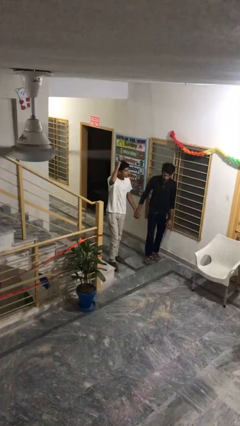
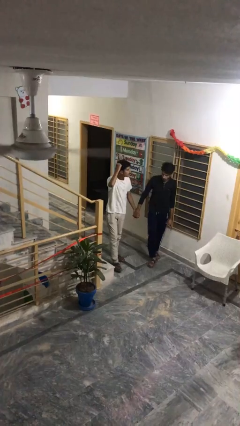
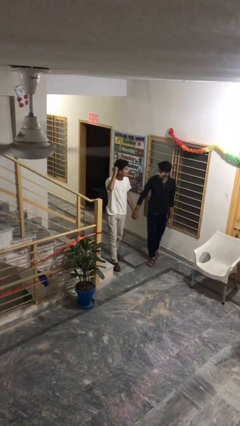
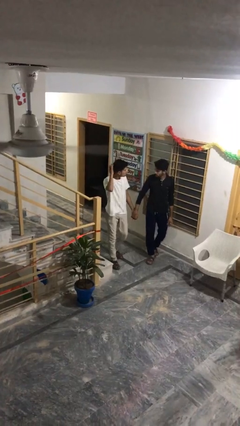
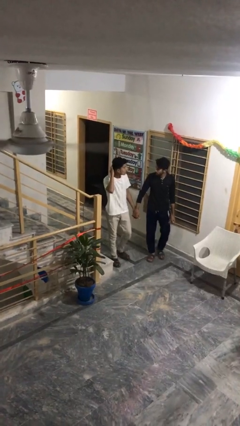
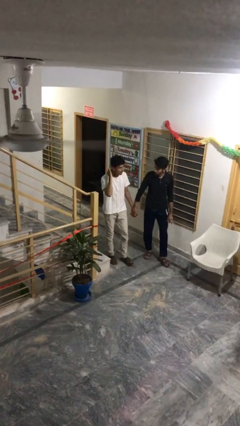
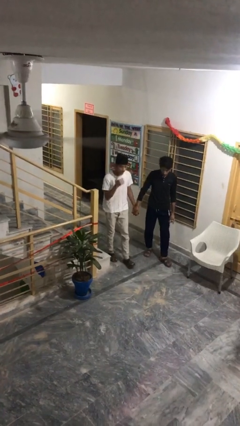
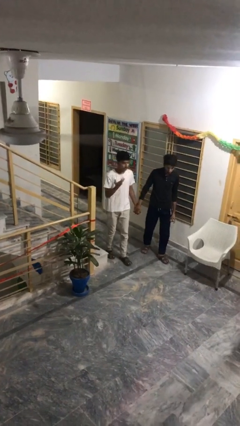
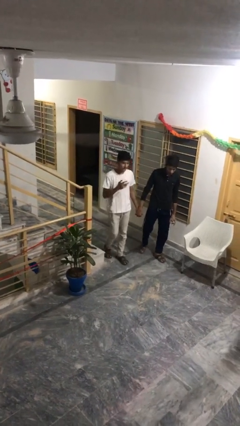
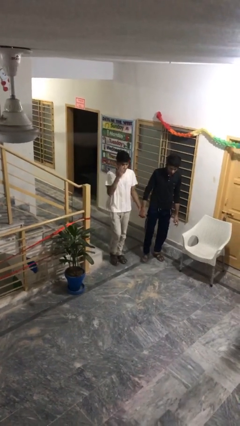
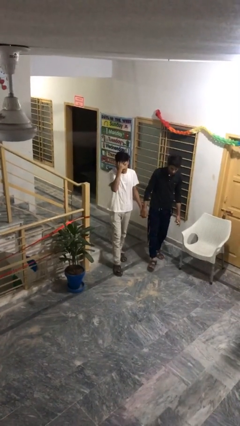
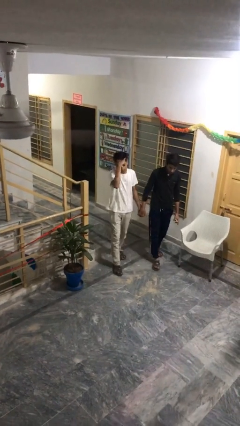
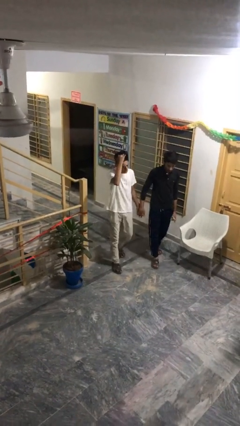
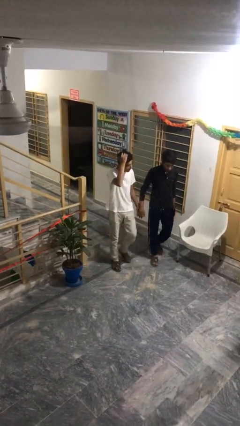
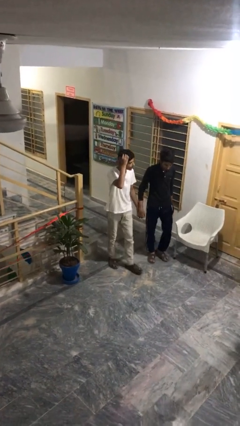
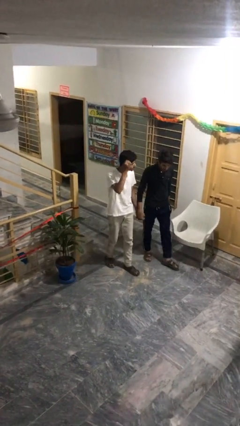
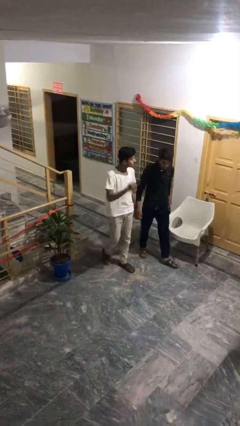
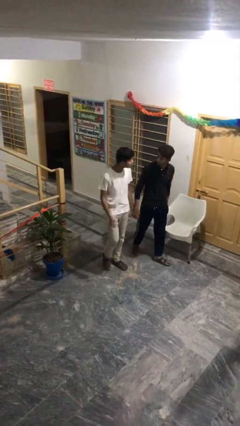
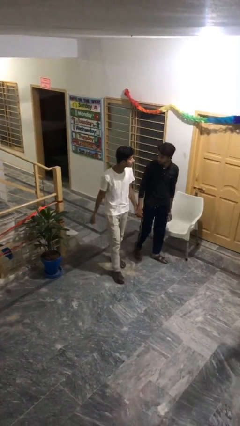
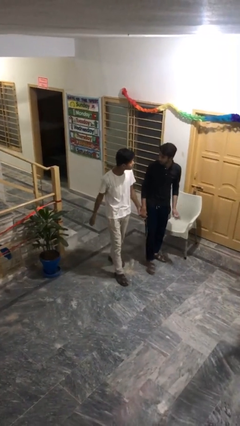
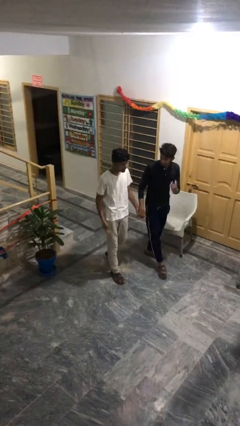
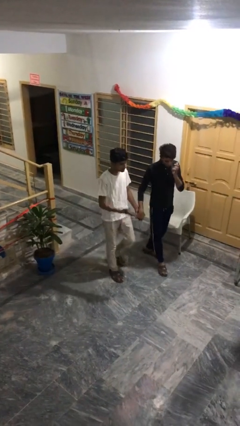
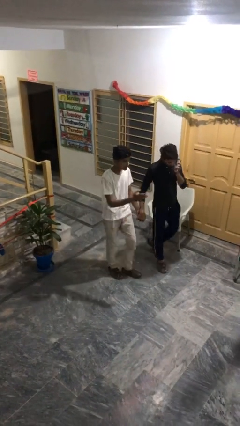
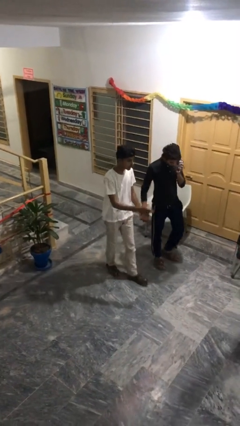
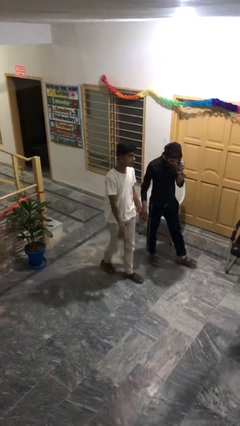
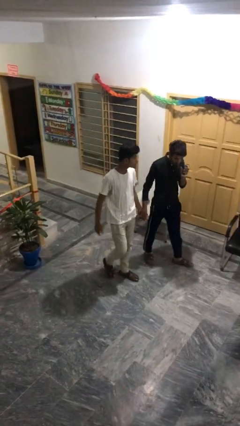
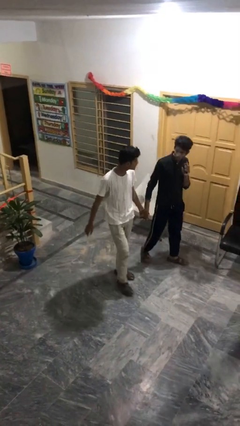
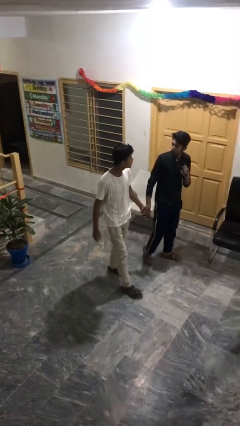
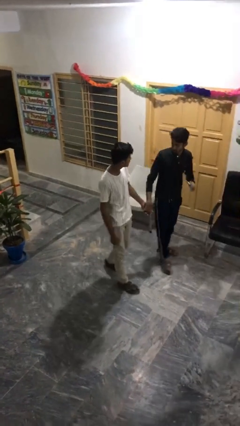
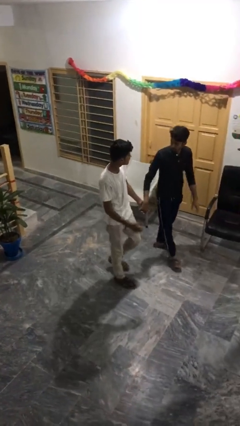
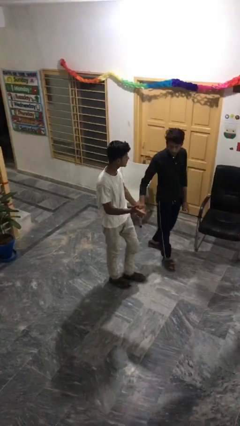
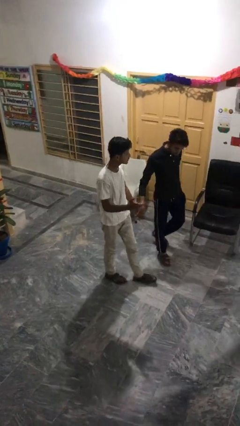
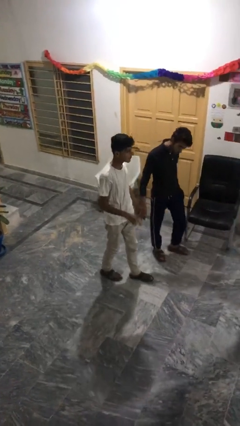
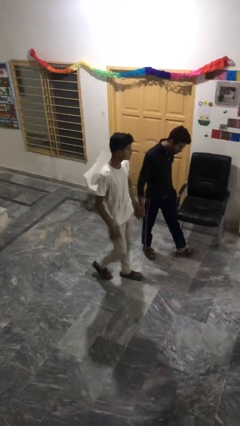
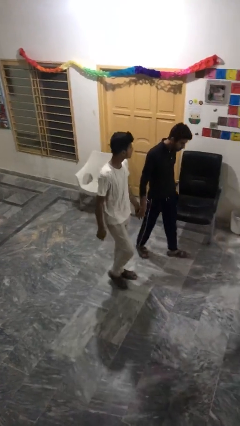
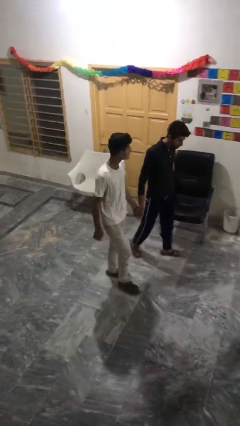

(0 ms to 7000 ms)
person holds hand

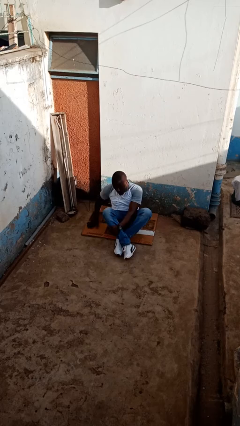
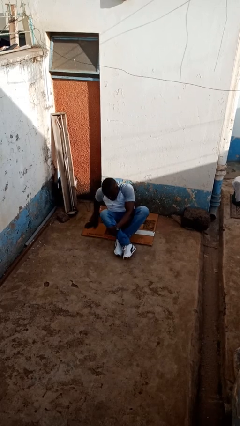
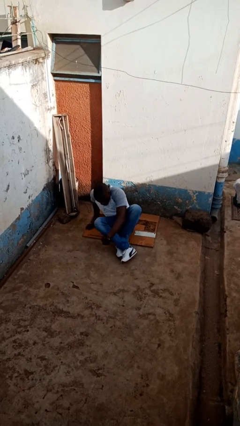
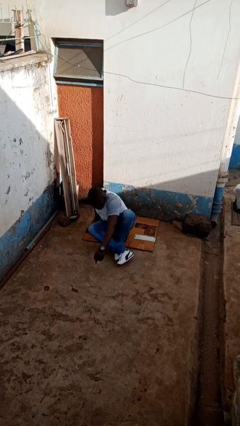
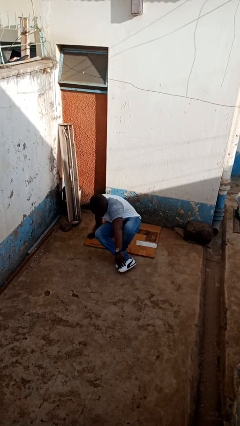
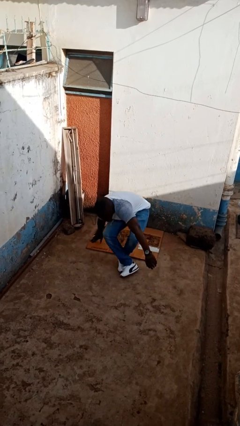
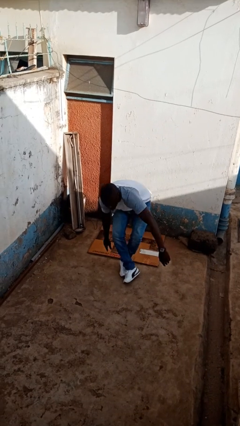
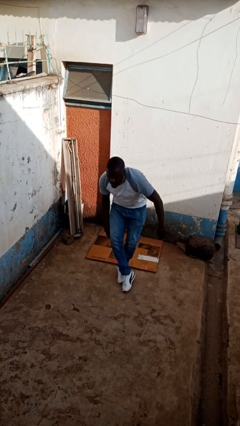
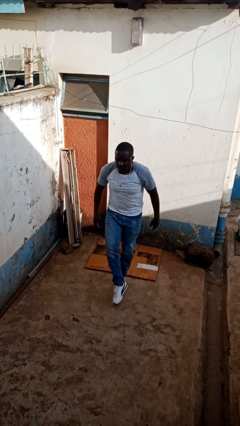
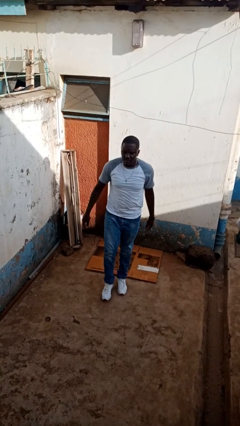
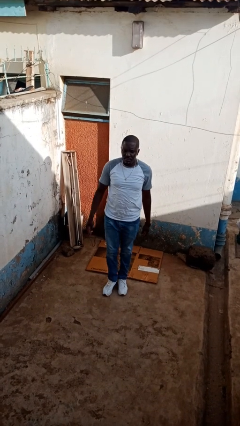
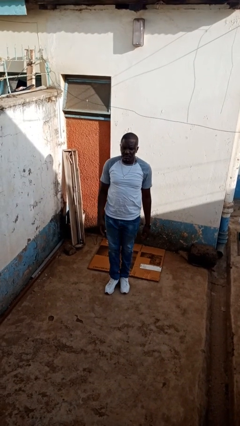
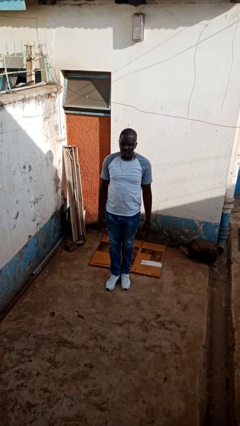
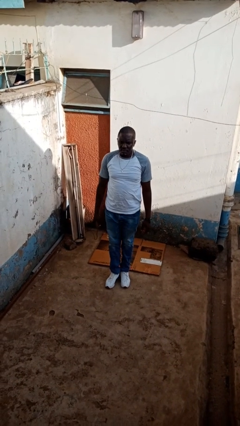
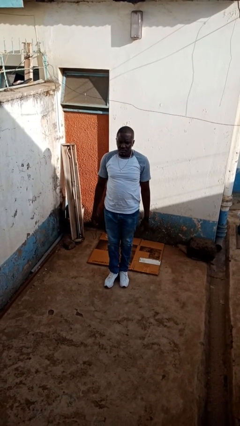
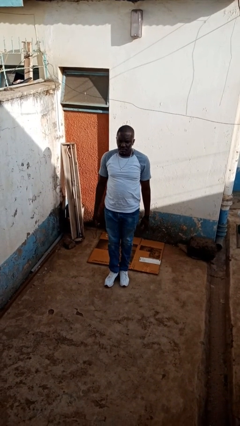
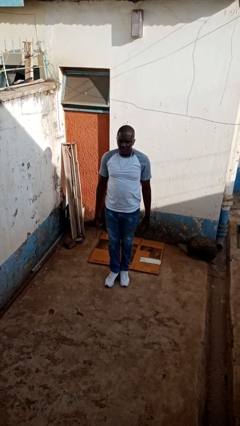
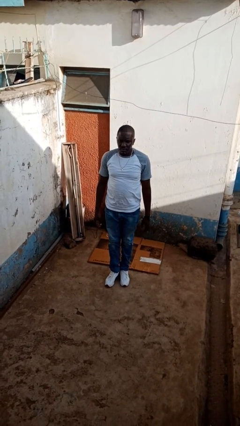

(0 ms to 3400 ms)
person stands up from floor

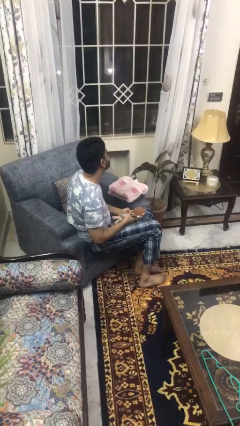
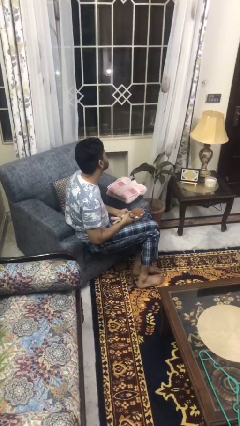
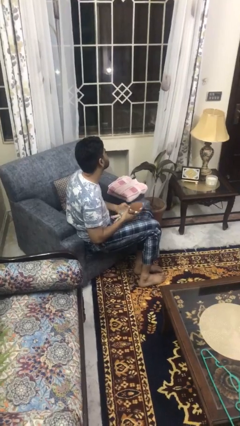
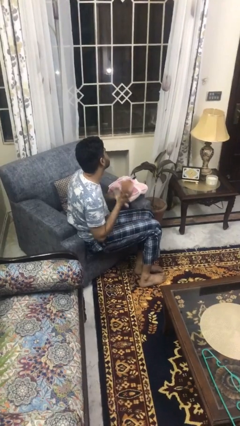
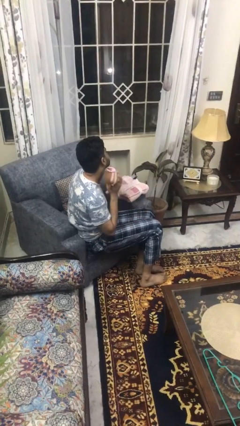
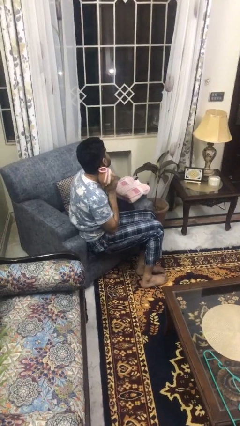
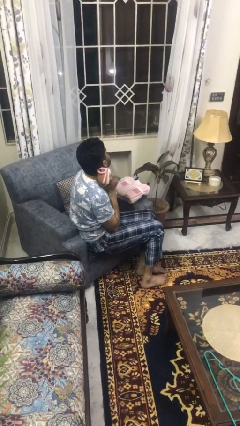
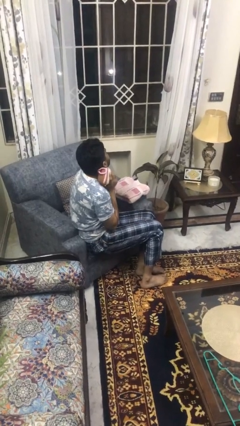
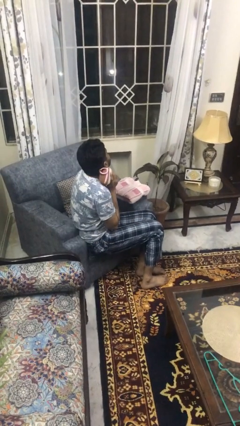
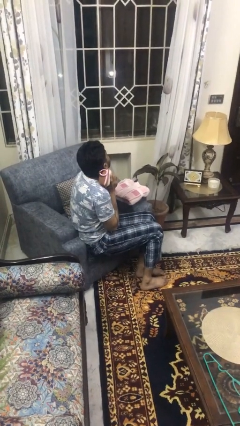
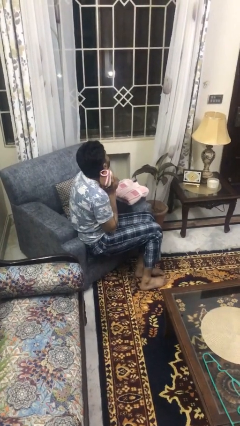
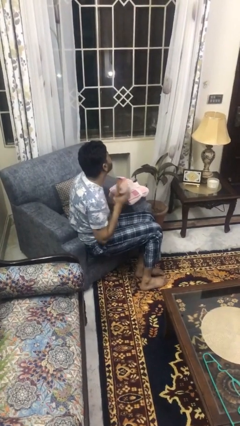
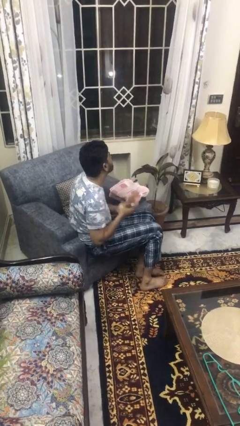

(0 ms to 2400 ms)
person hugs stuffed animal

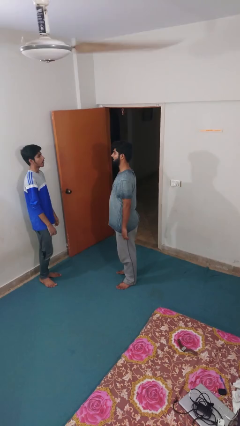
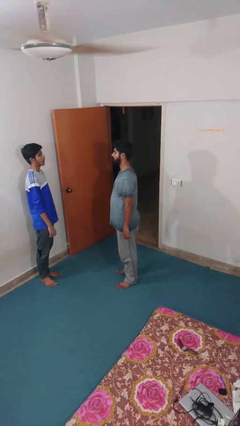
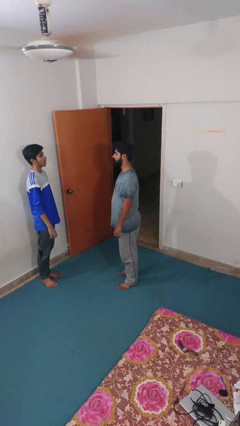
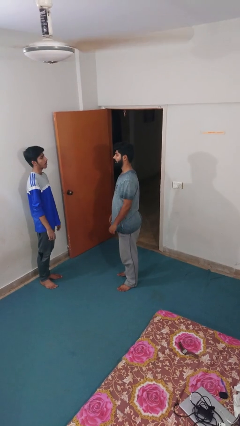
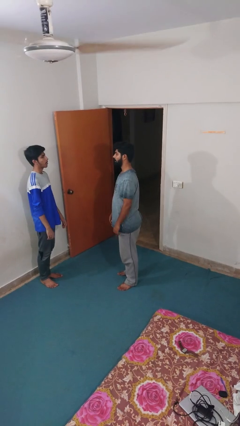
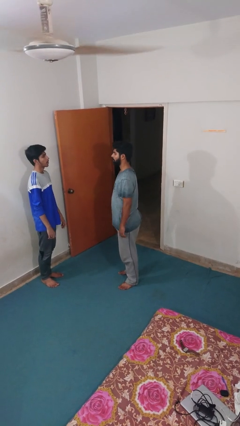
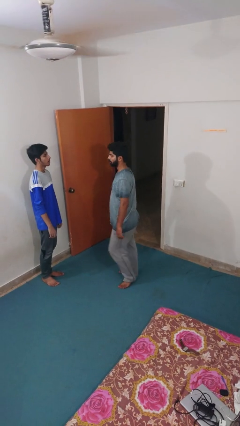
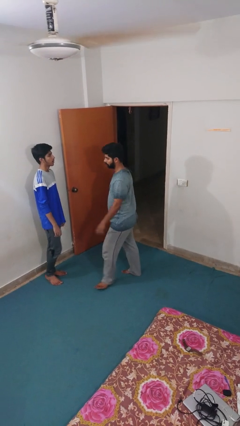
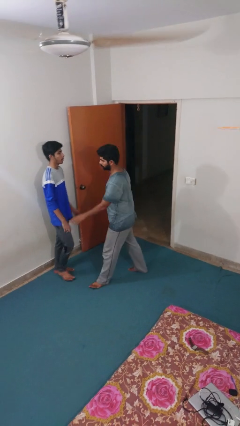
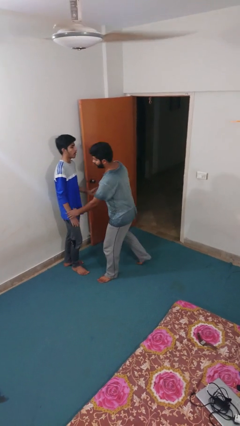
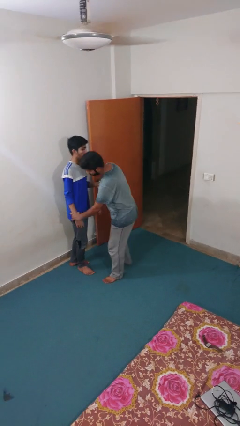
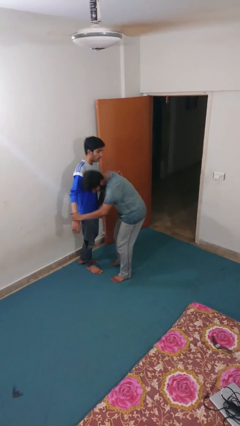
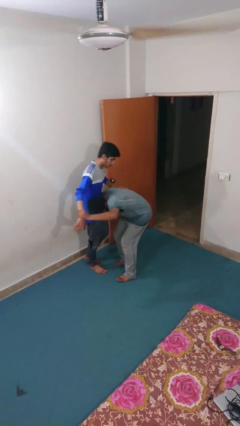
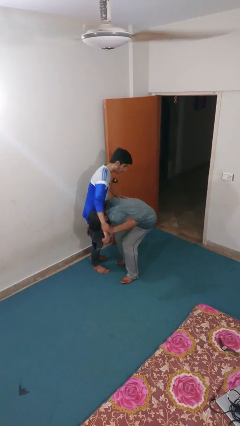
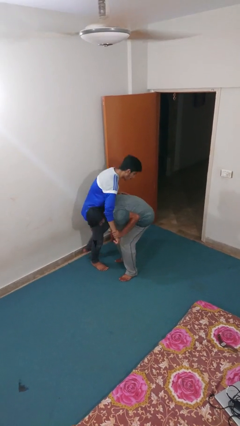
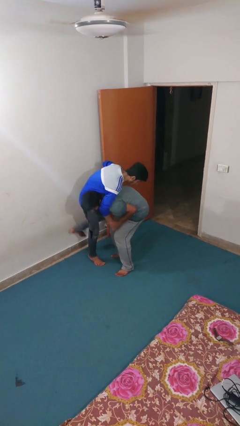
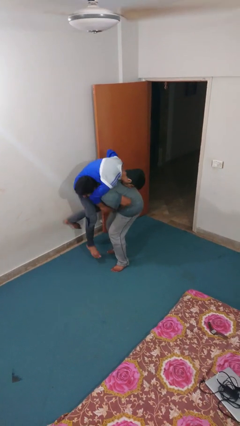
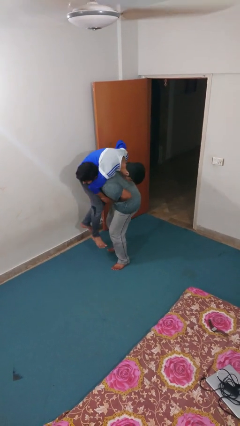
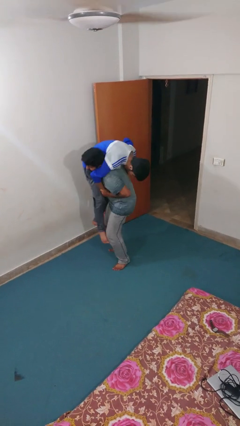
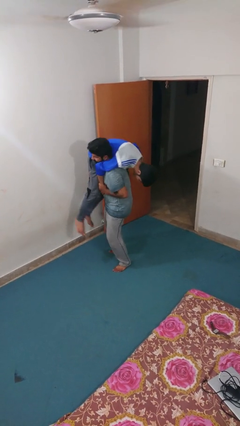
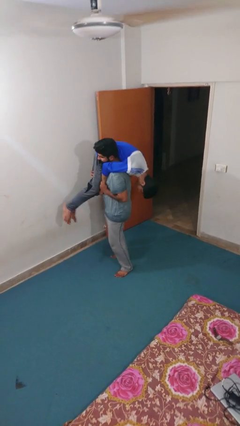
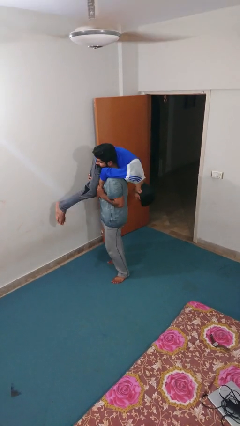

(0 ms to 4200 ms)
person carries person over shoulder

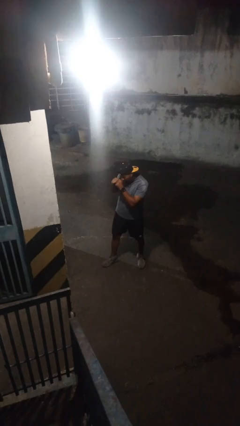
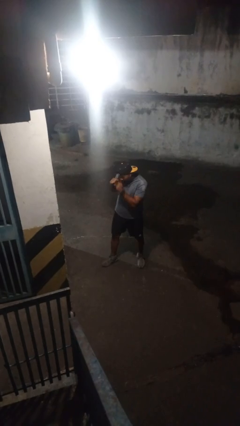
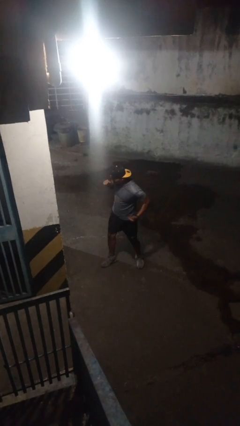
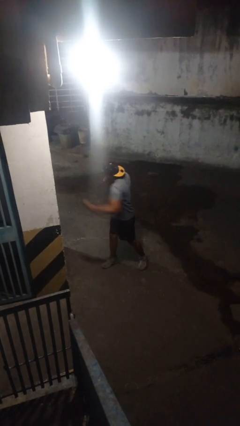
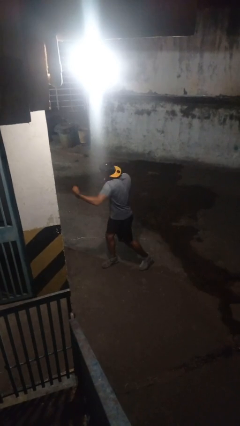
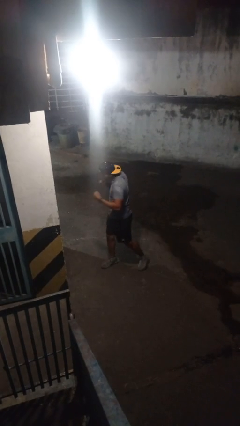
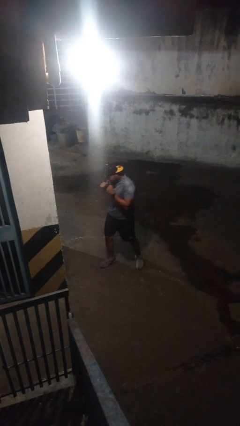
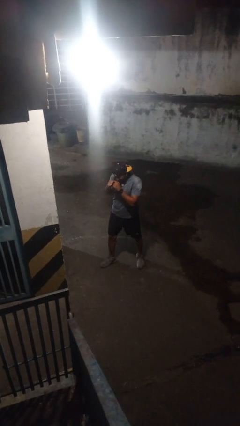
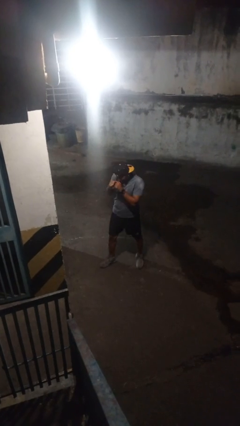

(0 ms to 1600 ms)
person punches
